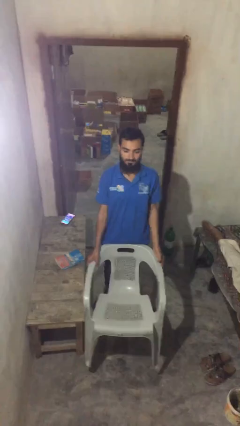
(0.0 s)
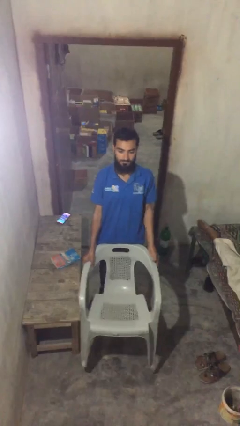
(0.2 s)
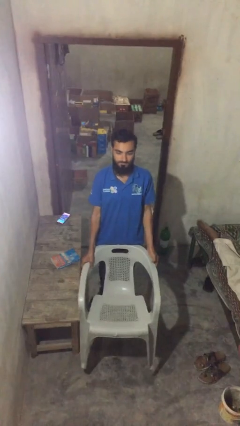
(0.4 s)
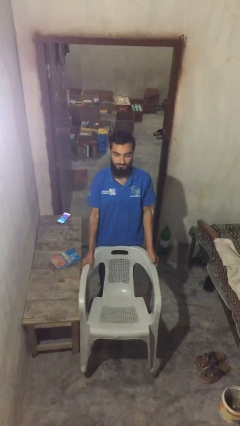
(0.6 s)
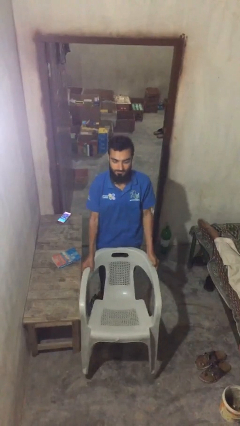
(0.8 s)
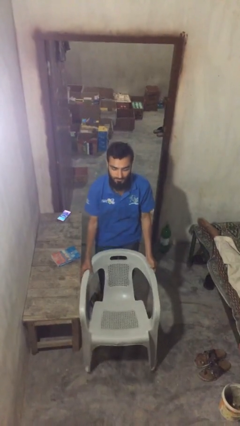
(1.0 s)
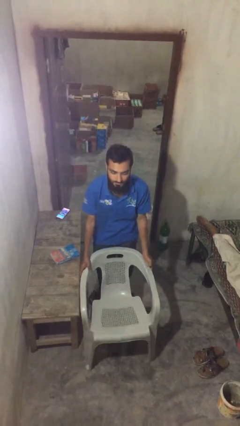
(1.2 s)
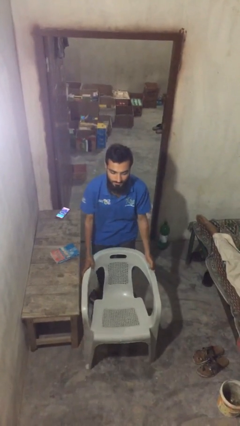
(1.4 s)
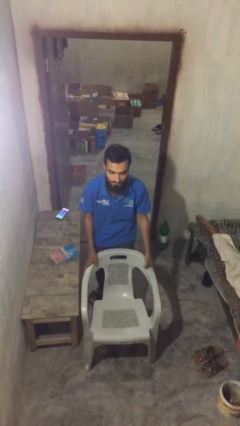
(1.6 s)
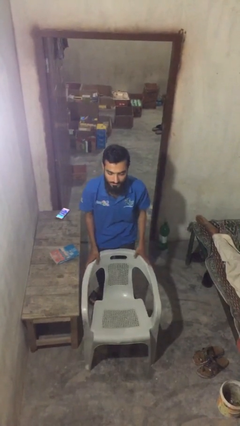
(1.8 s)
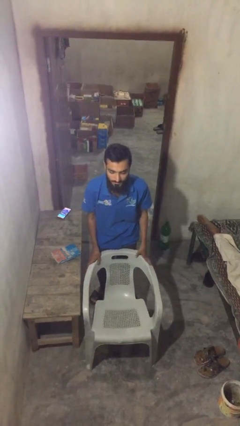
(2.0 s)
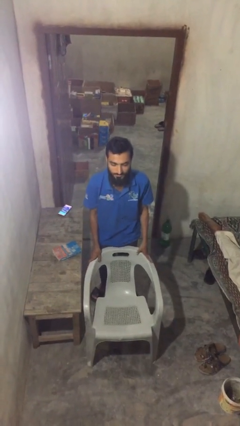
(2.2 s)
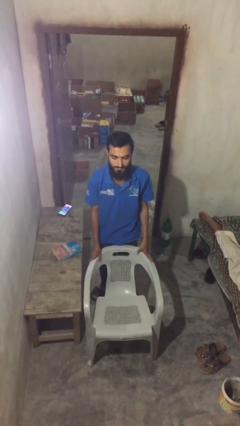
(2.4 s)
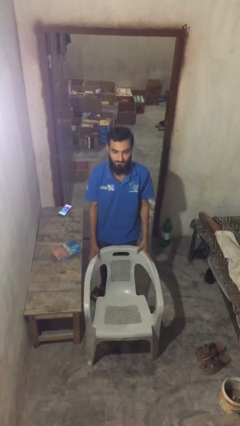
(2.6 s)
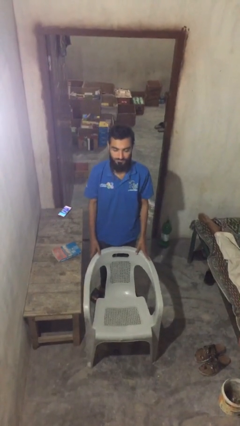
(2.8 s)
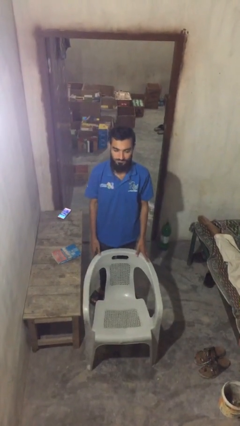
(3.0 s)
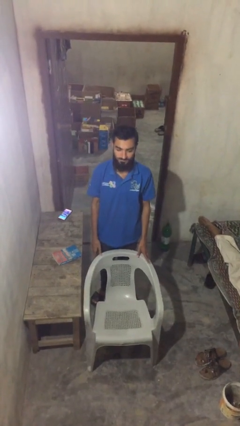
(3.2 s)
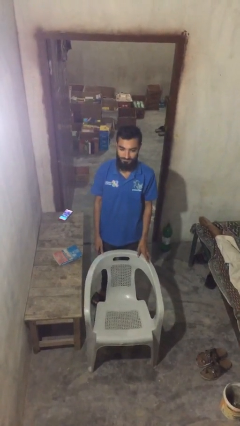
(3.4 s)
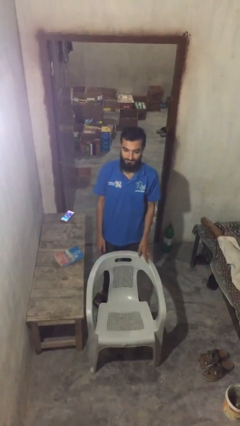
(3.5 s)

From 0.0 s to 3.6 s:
person puts down object on floor

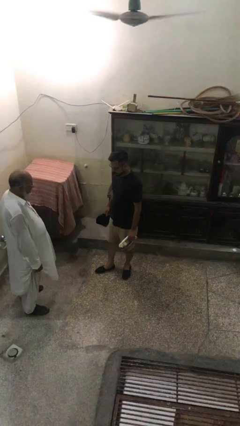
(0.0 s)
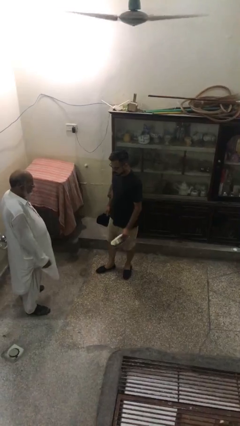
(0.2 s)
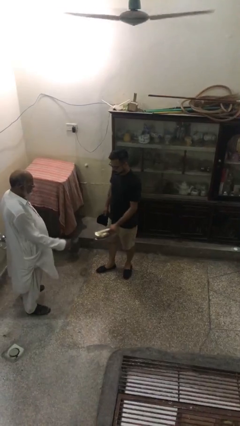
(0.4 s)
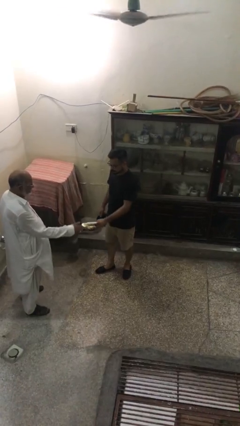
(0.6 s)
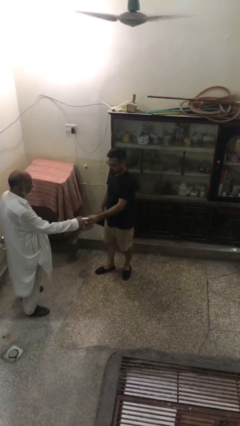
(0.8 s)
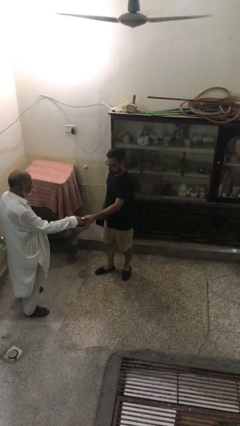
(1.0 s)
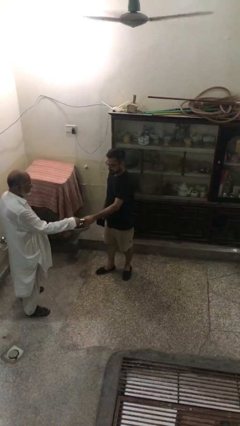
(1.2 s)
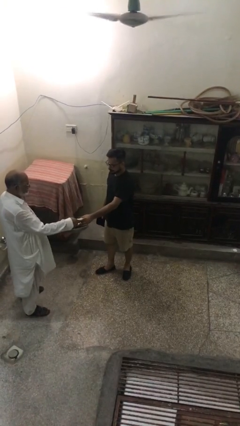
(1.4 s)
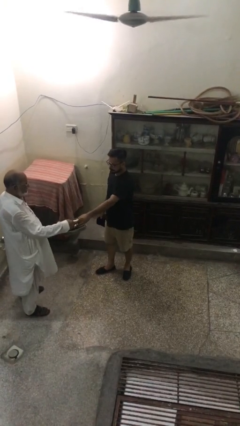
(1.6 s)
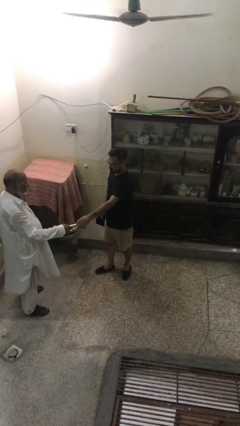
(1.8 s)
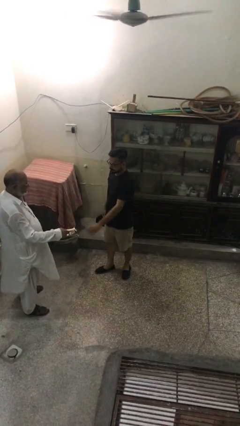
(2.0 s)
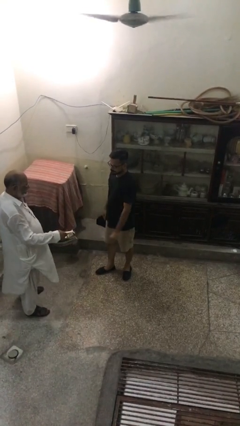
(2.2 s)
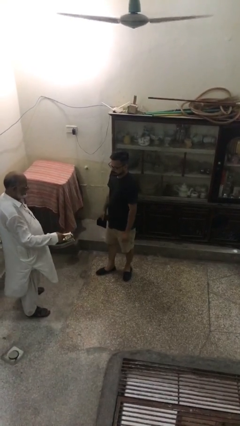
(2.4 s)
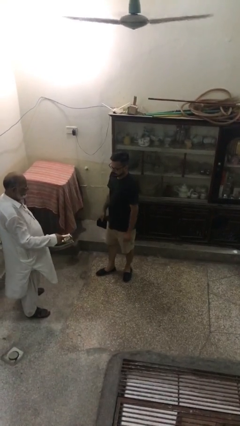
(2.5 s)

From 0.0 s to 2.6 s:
person transfers object to person

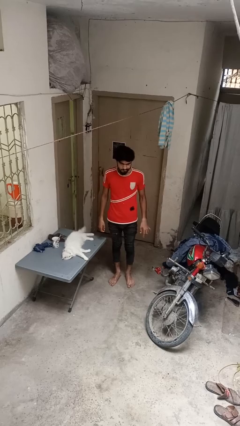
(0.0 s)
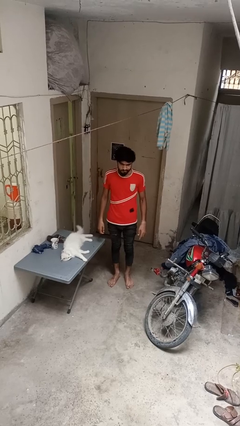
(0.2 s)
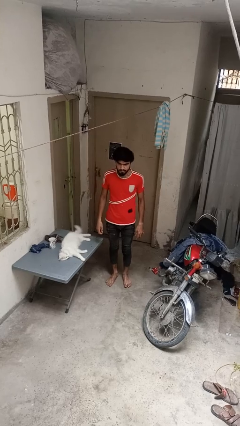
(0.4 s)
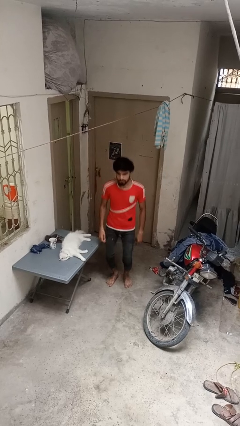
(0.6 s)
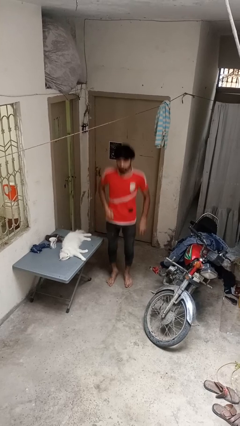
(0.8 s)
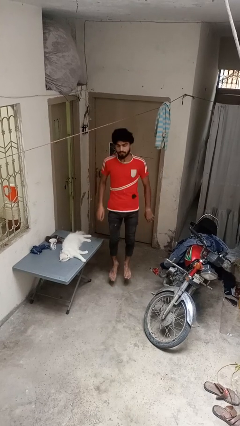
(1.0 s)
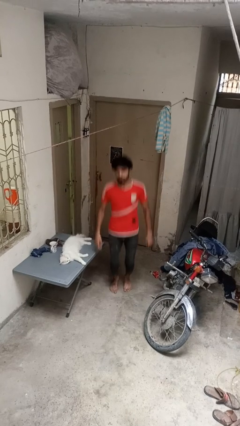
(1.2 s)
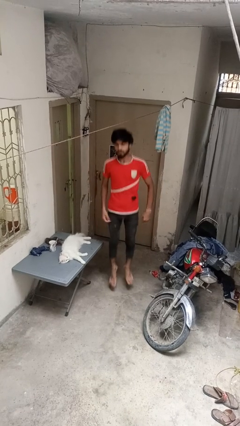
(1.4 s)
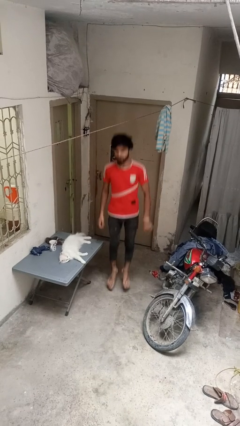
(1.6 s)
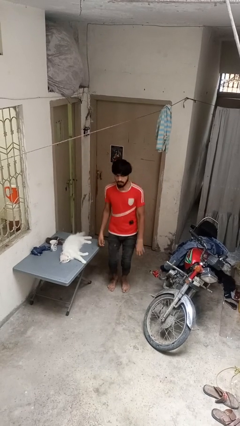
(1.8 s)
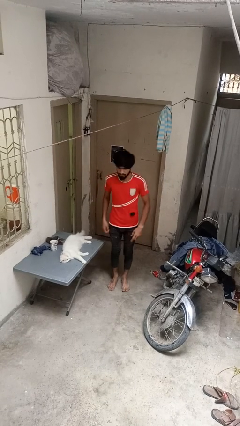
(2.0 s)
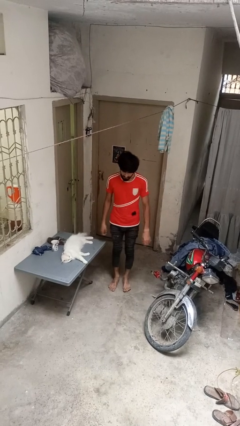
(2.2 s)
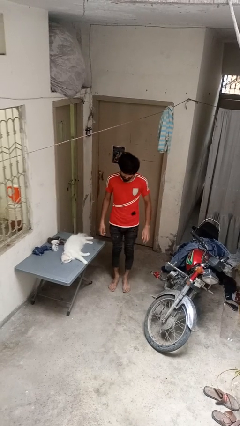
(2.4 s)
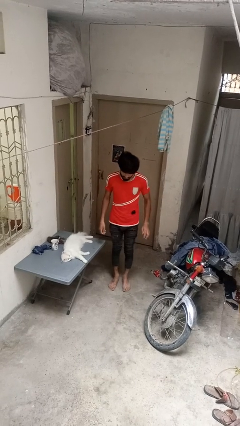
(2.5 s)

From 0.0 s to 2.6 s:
person jumps

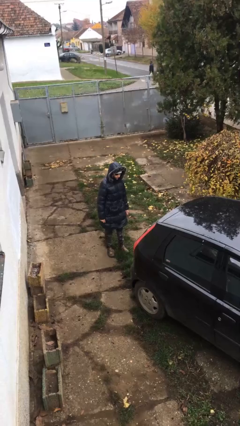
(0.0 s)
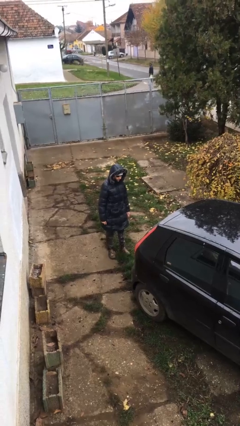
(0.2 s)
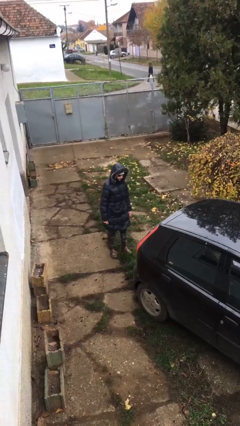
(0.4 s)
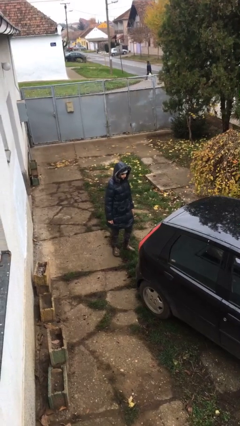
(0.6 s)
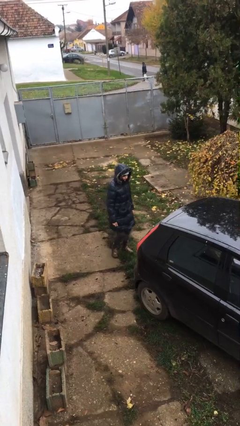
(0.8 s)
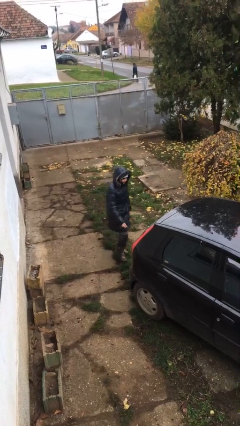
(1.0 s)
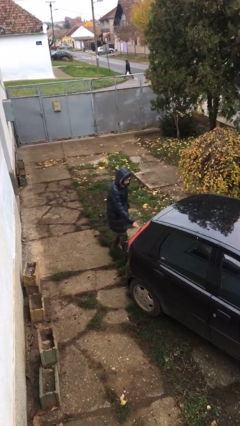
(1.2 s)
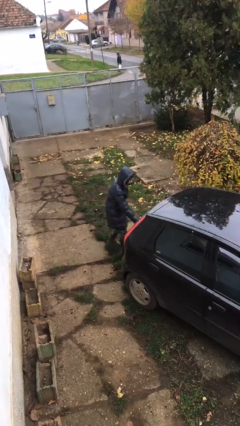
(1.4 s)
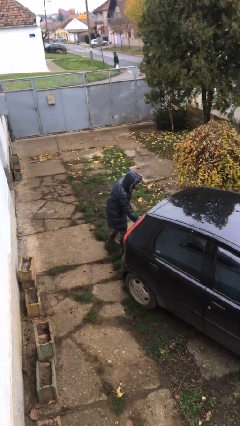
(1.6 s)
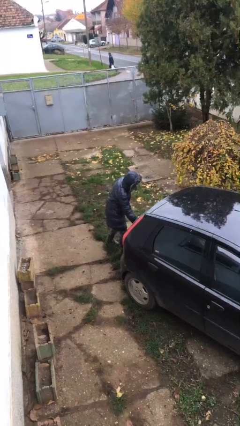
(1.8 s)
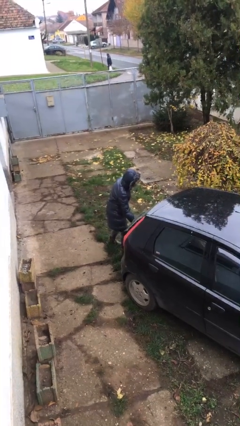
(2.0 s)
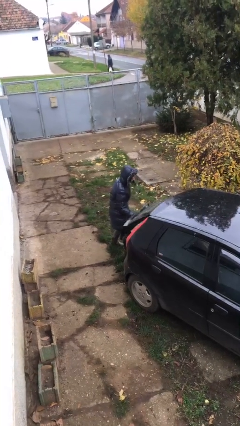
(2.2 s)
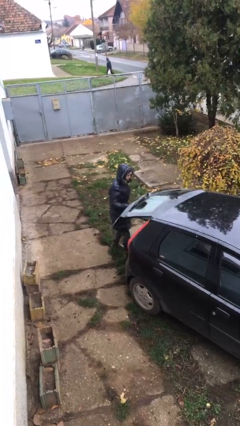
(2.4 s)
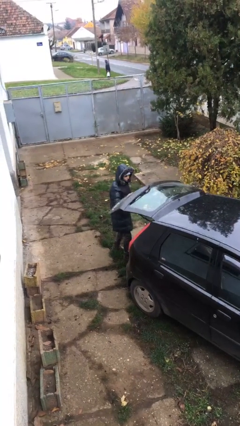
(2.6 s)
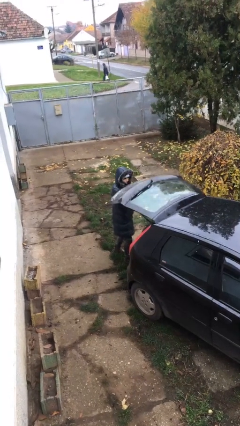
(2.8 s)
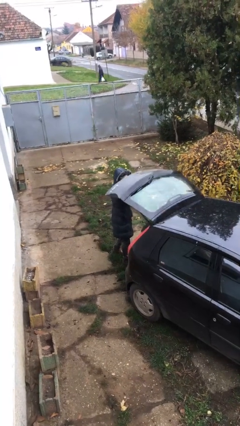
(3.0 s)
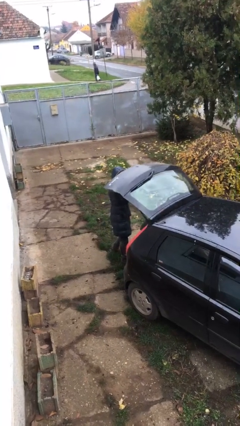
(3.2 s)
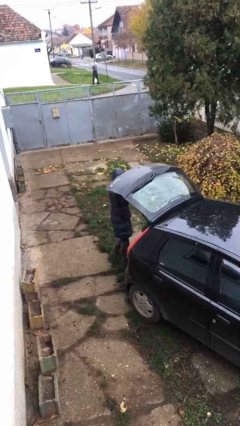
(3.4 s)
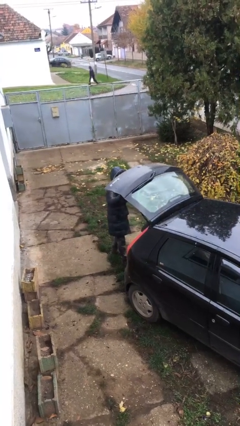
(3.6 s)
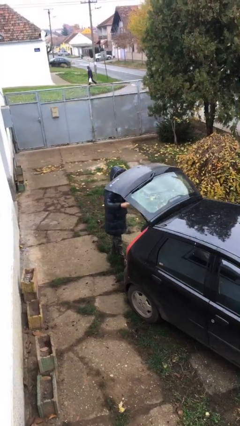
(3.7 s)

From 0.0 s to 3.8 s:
person opens car trunk

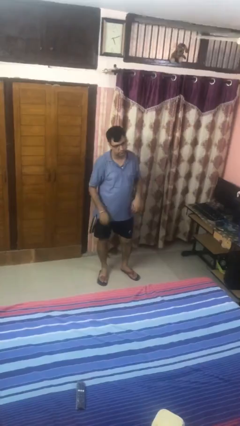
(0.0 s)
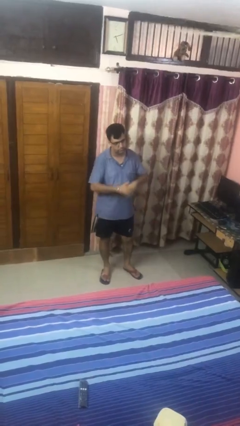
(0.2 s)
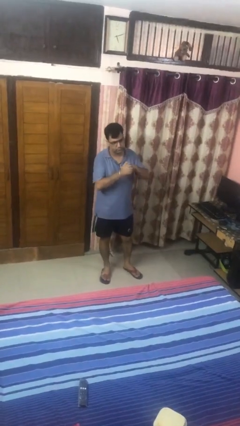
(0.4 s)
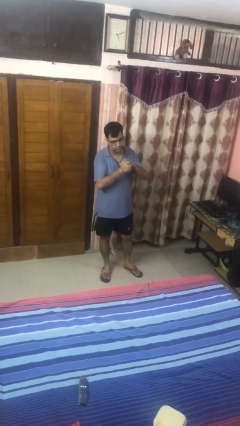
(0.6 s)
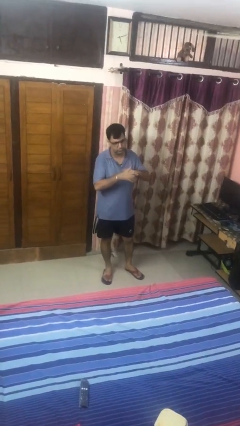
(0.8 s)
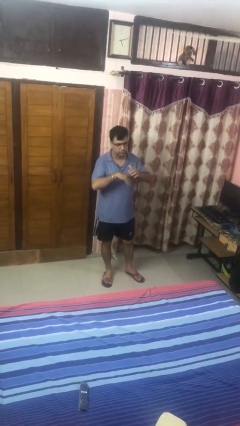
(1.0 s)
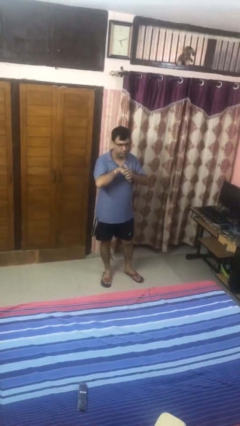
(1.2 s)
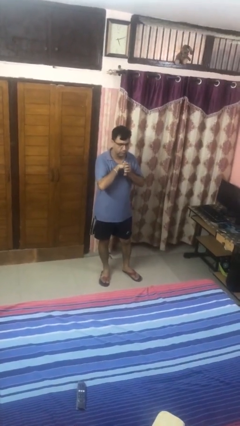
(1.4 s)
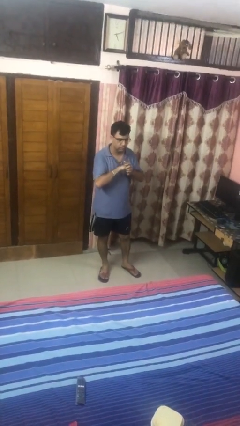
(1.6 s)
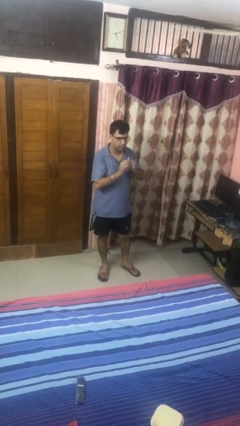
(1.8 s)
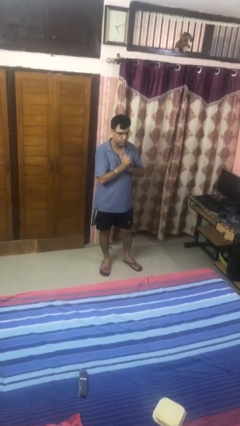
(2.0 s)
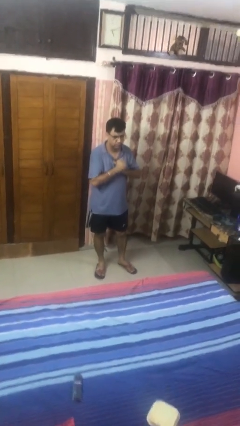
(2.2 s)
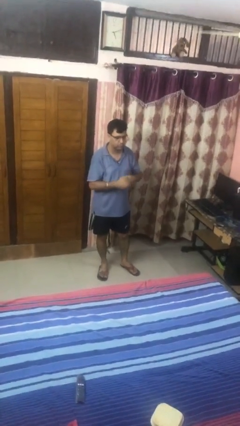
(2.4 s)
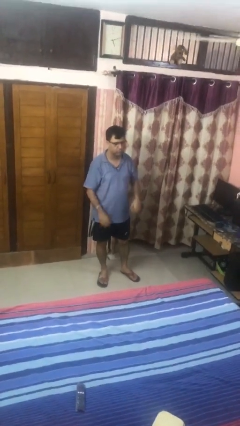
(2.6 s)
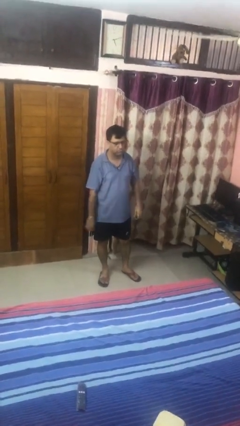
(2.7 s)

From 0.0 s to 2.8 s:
person cracks knuckles

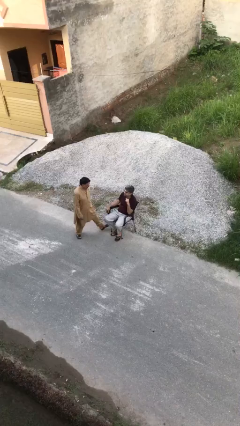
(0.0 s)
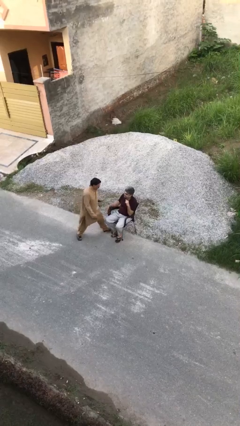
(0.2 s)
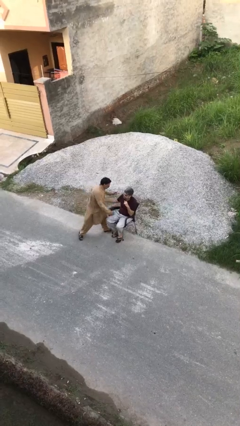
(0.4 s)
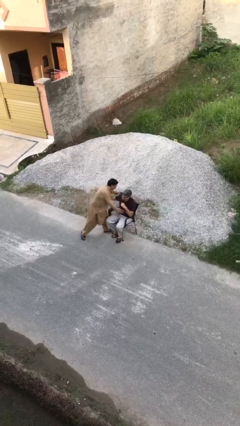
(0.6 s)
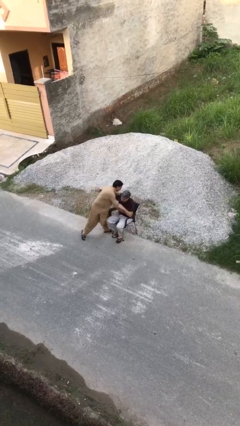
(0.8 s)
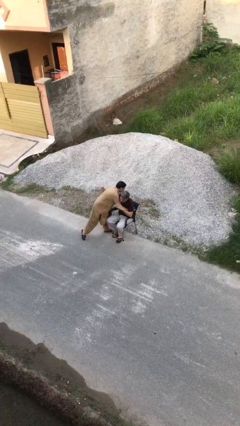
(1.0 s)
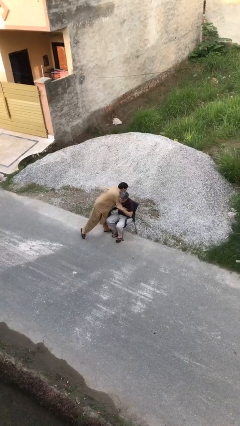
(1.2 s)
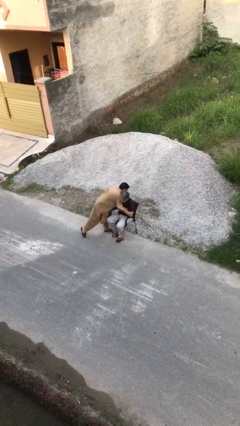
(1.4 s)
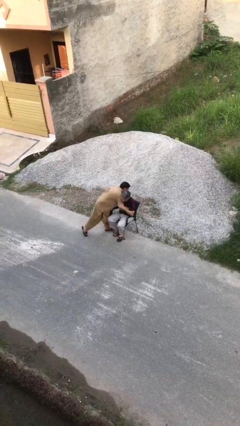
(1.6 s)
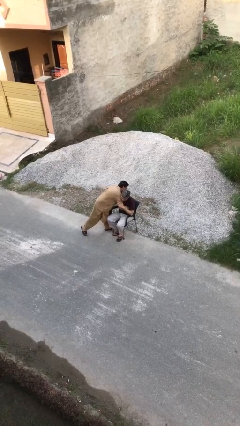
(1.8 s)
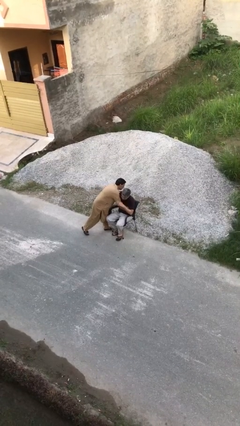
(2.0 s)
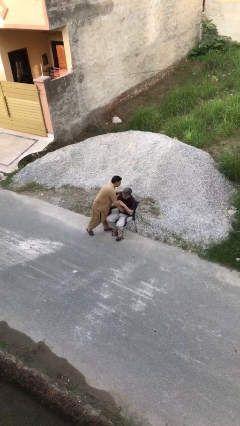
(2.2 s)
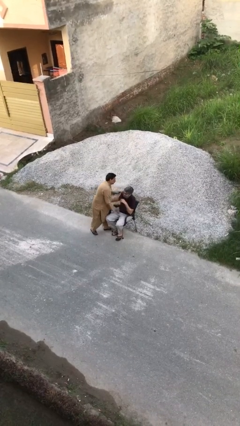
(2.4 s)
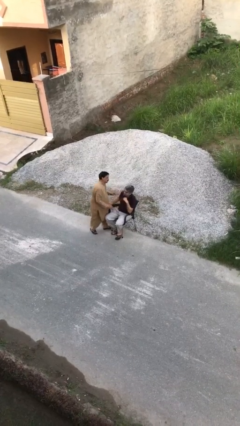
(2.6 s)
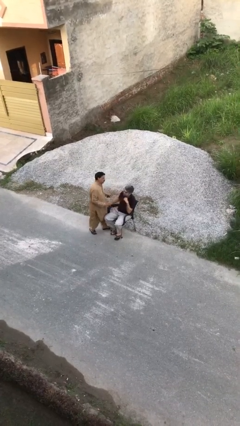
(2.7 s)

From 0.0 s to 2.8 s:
person embraces person
